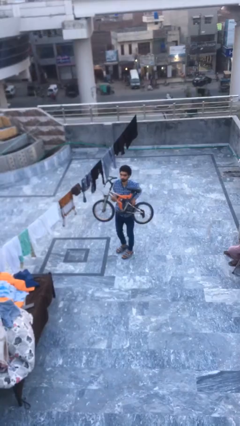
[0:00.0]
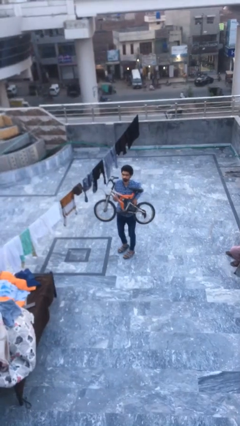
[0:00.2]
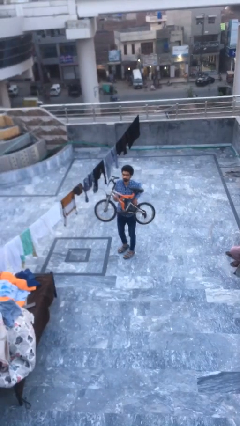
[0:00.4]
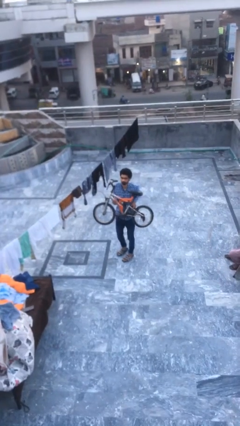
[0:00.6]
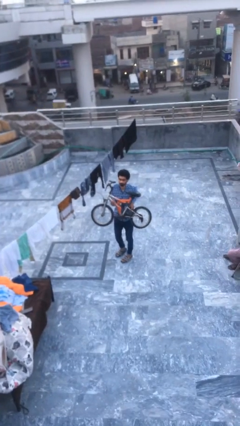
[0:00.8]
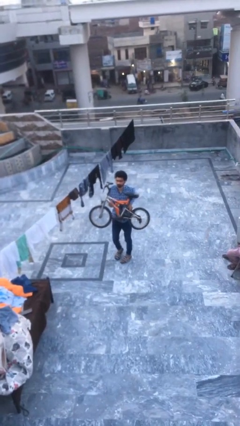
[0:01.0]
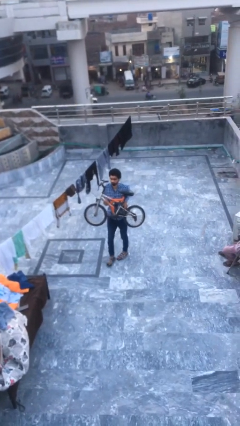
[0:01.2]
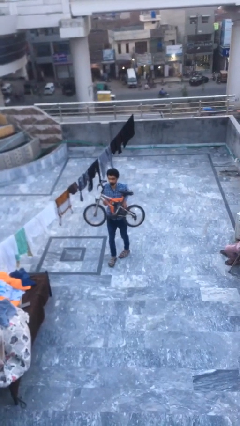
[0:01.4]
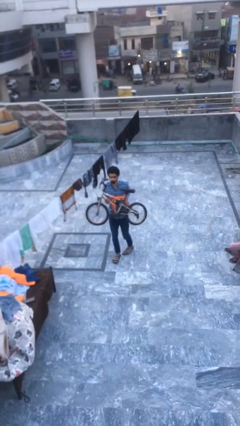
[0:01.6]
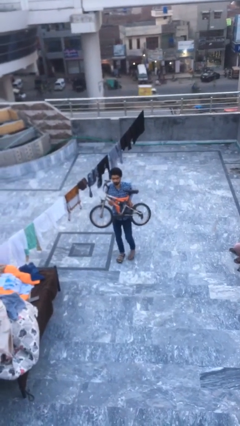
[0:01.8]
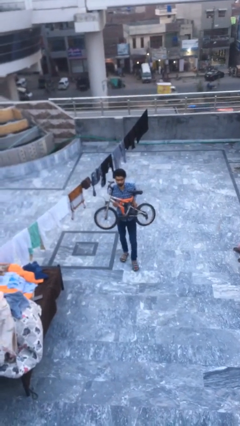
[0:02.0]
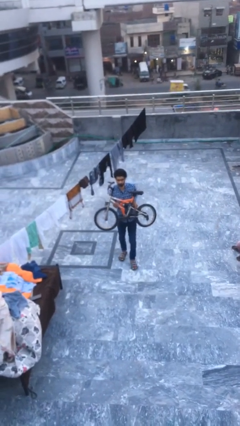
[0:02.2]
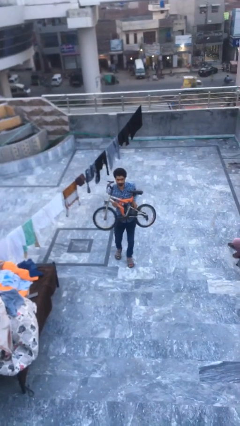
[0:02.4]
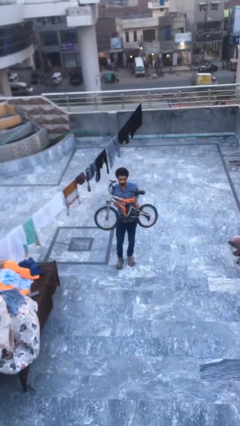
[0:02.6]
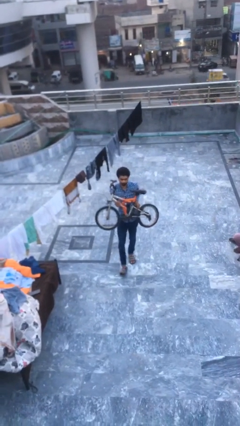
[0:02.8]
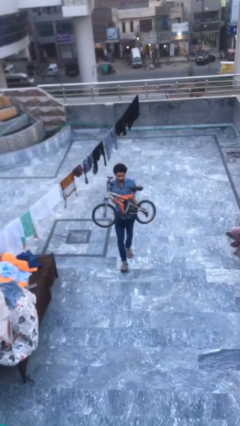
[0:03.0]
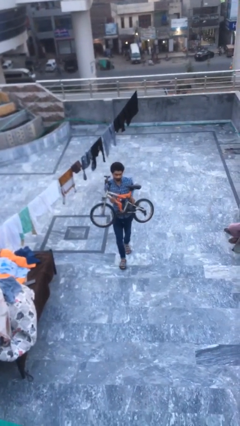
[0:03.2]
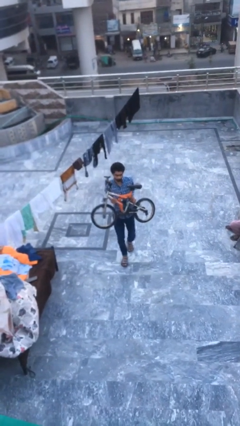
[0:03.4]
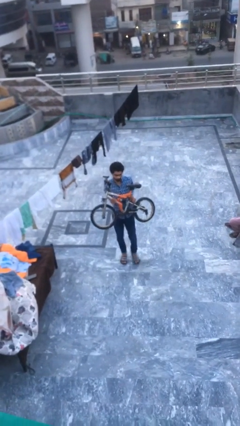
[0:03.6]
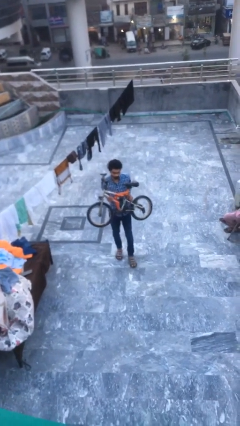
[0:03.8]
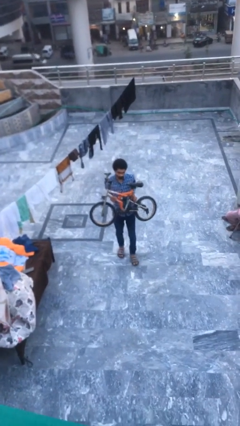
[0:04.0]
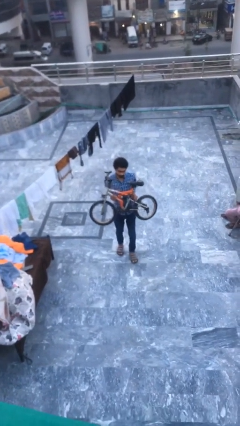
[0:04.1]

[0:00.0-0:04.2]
person carries heavy object

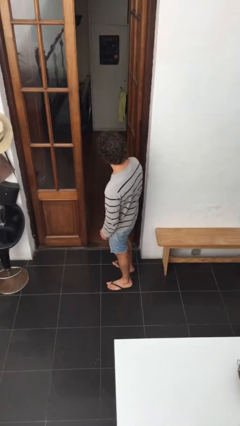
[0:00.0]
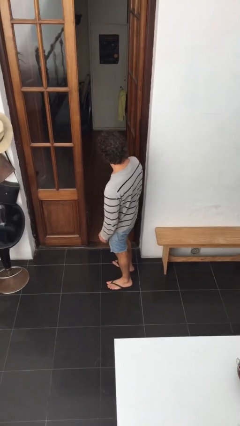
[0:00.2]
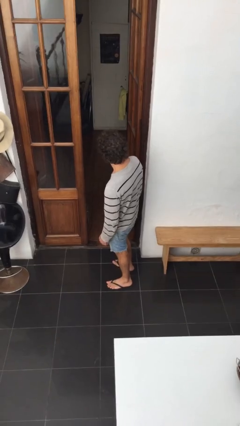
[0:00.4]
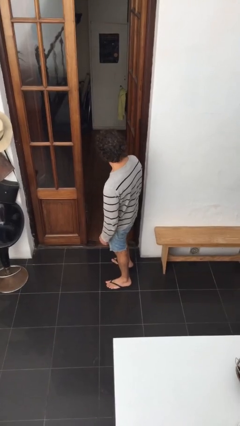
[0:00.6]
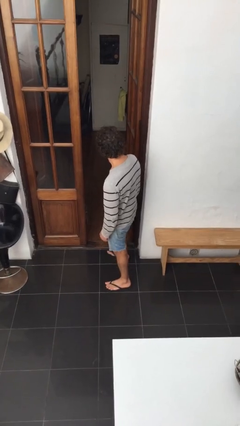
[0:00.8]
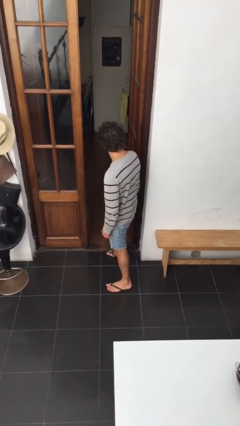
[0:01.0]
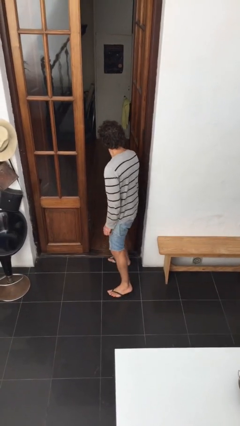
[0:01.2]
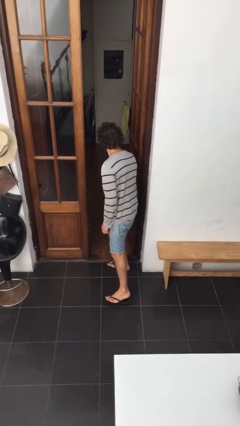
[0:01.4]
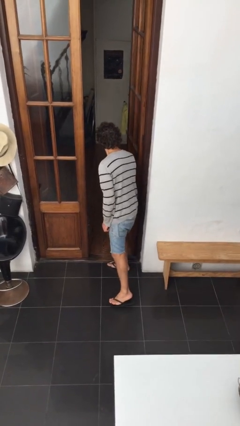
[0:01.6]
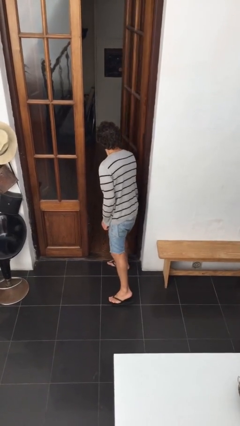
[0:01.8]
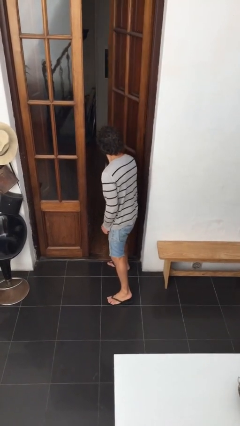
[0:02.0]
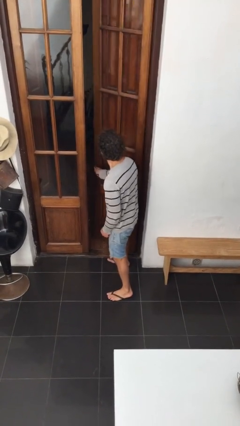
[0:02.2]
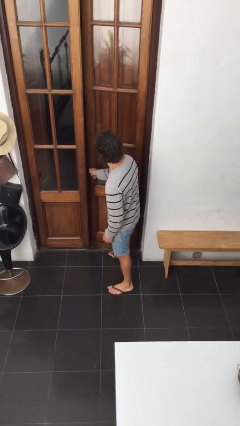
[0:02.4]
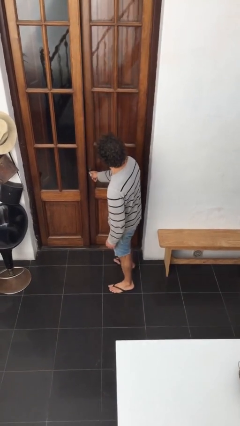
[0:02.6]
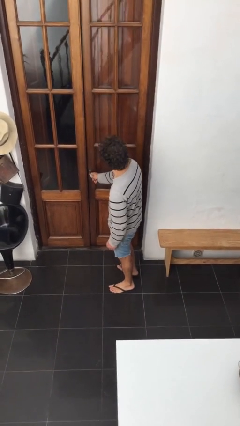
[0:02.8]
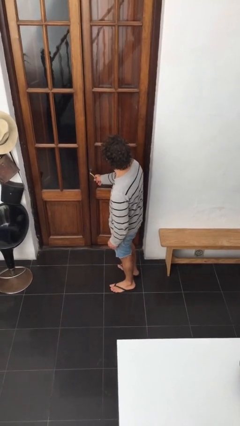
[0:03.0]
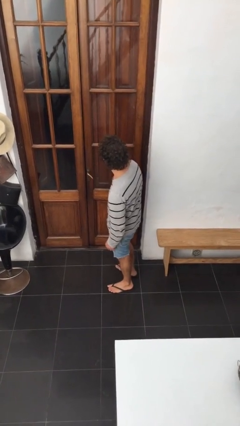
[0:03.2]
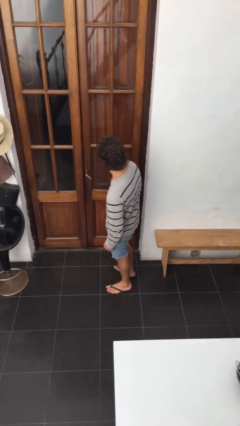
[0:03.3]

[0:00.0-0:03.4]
person closes facility door

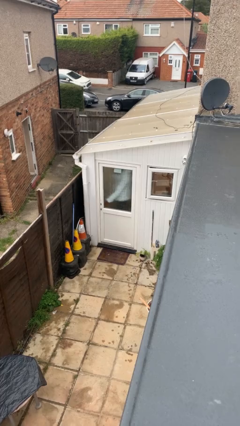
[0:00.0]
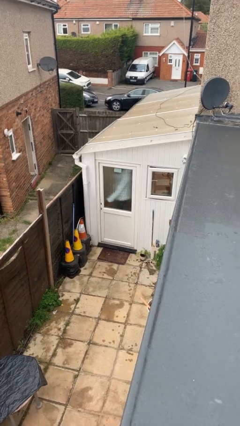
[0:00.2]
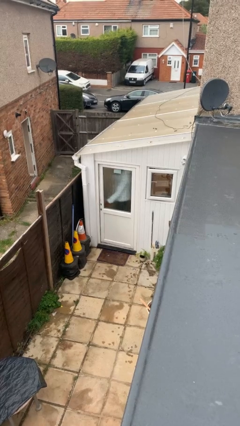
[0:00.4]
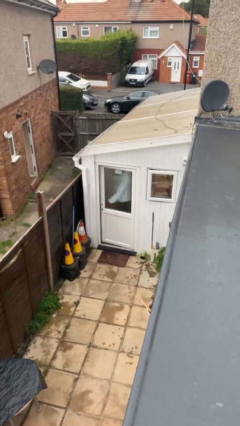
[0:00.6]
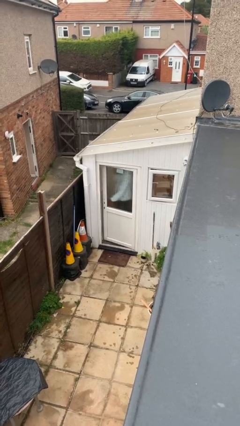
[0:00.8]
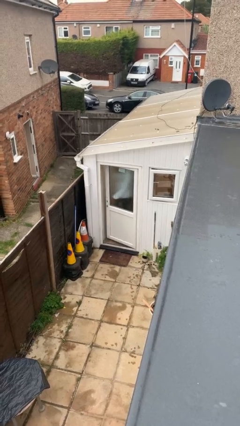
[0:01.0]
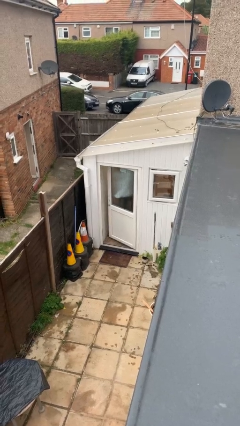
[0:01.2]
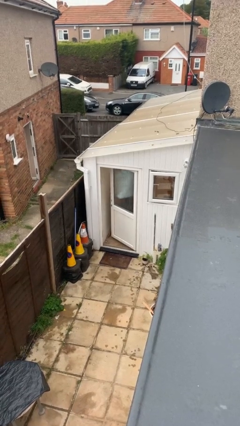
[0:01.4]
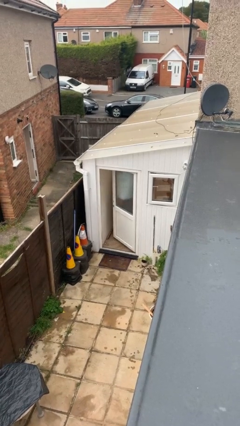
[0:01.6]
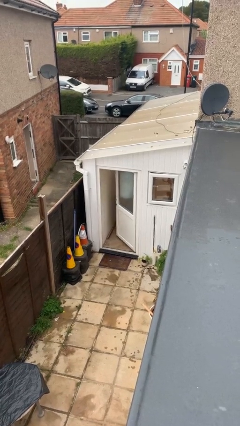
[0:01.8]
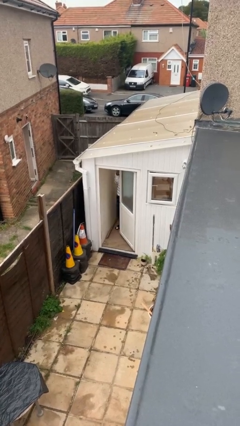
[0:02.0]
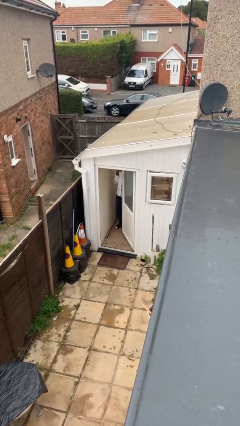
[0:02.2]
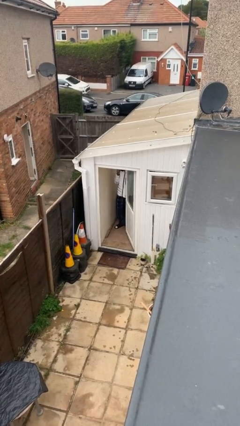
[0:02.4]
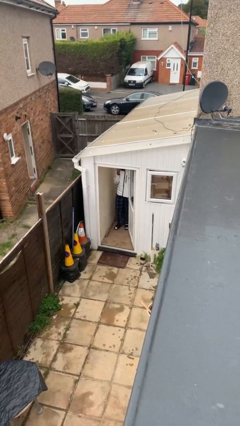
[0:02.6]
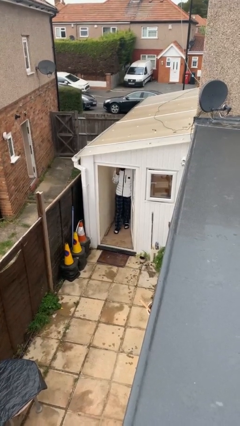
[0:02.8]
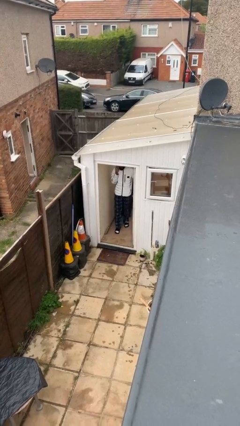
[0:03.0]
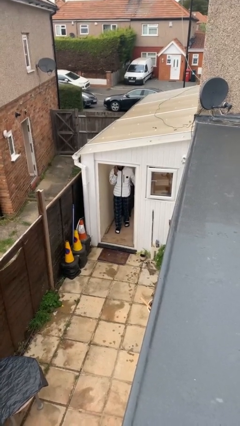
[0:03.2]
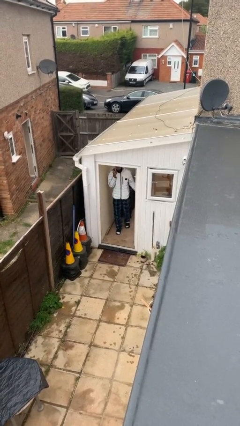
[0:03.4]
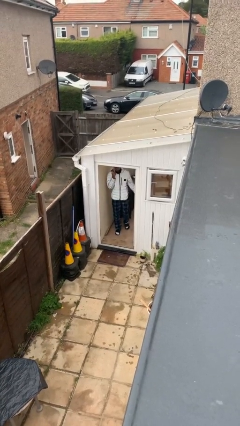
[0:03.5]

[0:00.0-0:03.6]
person opens facility door

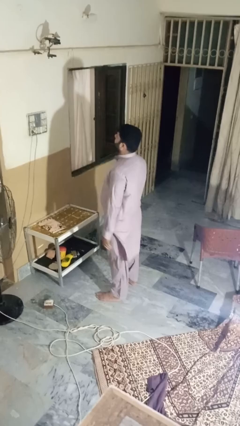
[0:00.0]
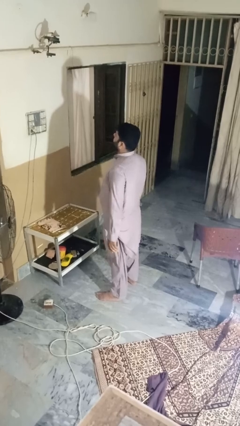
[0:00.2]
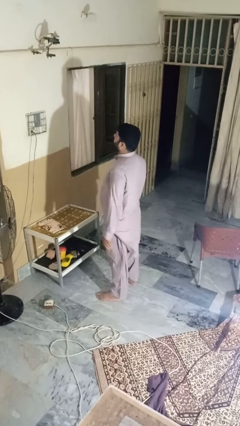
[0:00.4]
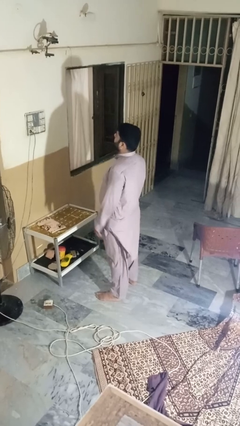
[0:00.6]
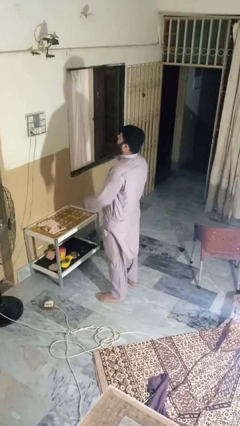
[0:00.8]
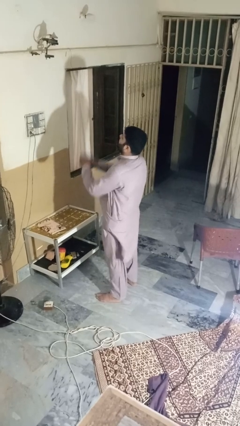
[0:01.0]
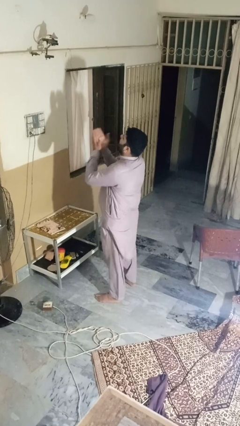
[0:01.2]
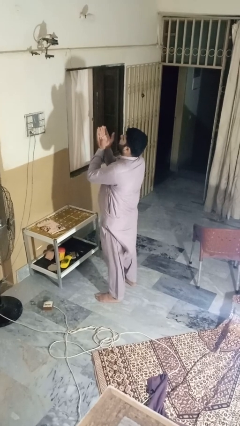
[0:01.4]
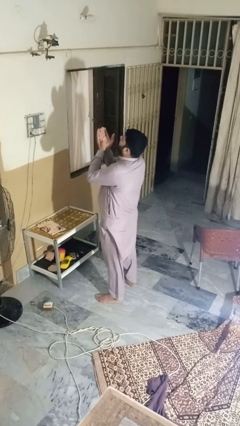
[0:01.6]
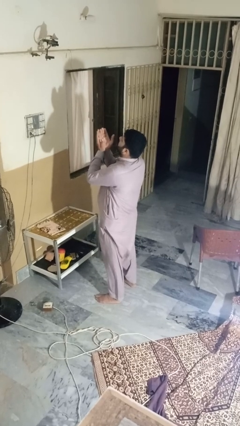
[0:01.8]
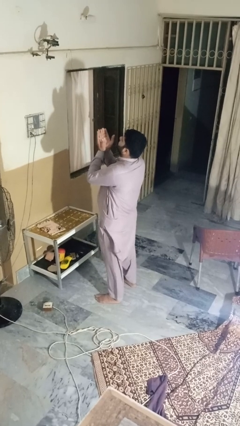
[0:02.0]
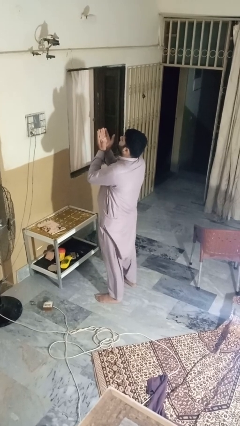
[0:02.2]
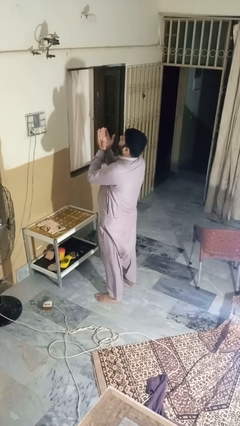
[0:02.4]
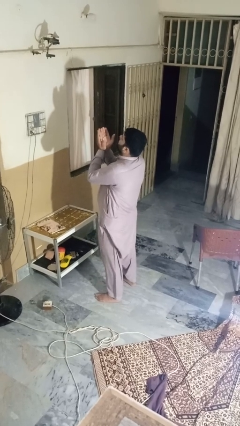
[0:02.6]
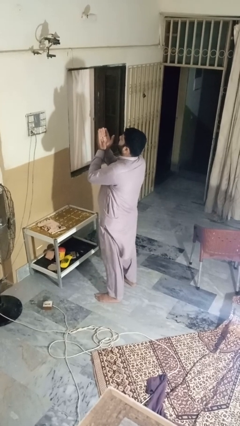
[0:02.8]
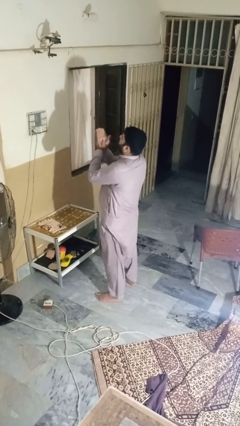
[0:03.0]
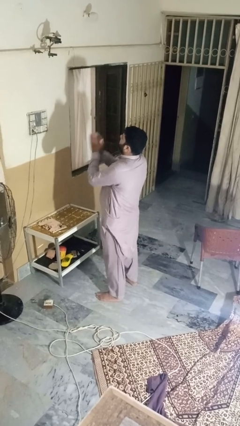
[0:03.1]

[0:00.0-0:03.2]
person prays

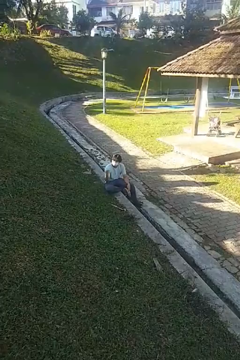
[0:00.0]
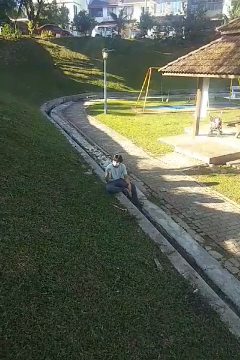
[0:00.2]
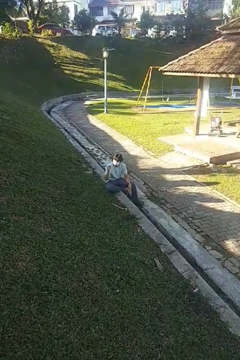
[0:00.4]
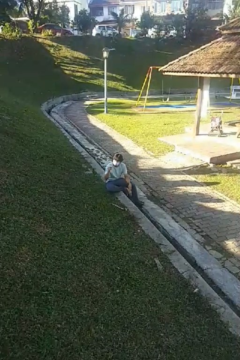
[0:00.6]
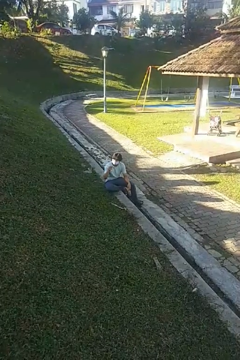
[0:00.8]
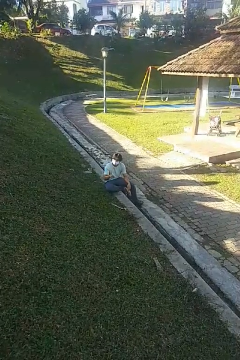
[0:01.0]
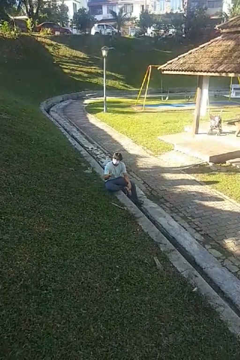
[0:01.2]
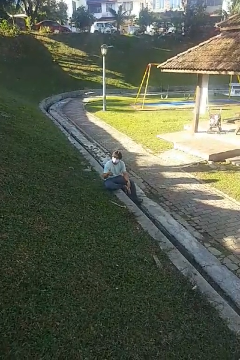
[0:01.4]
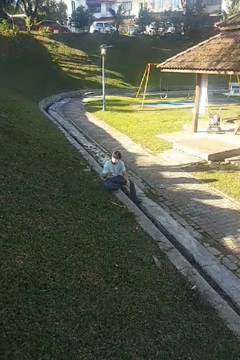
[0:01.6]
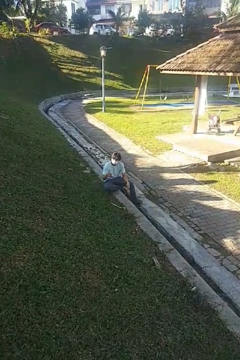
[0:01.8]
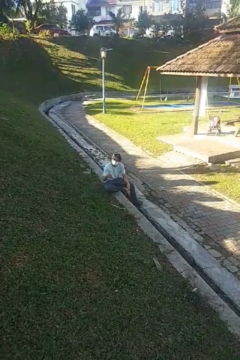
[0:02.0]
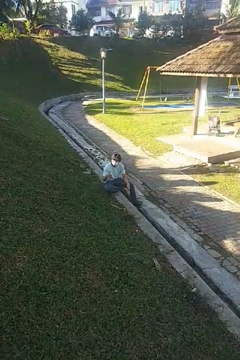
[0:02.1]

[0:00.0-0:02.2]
person snaps fingers

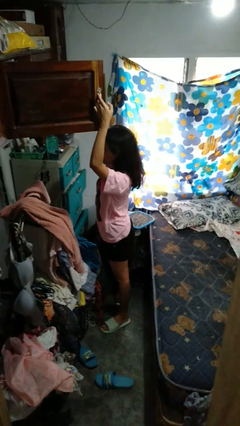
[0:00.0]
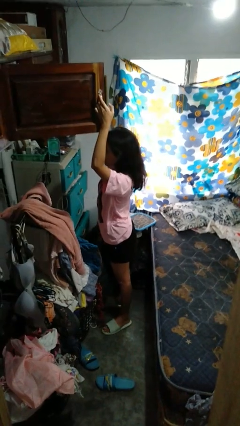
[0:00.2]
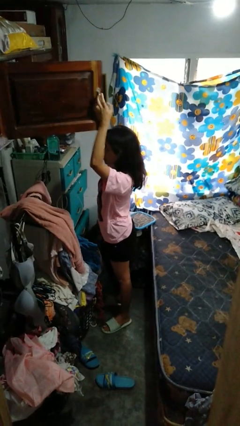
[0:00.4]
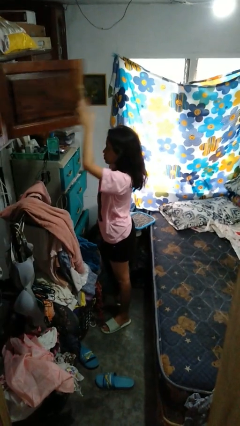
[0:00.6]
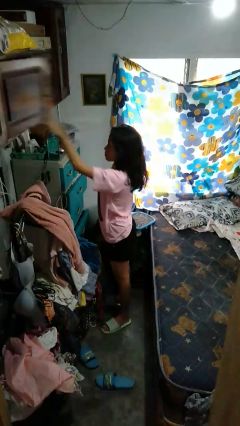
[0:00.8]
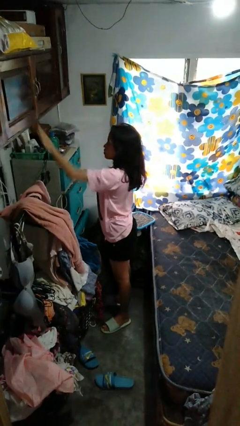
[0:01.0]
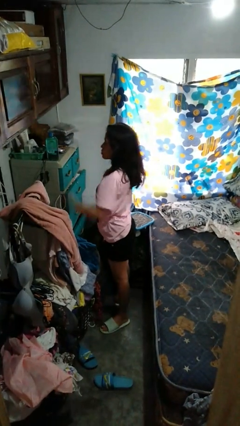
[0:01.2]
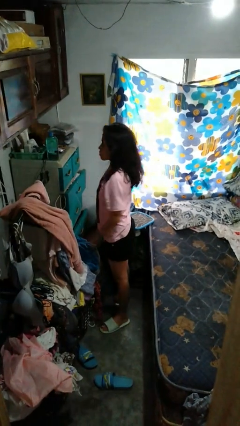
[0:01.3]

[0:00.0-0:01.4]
person closes closet door
